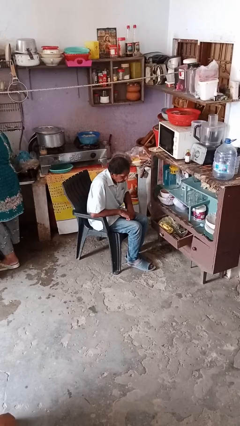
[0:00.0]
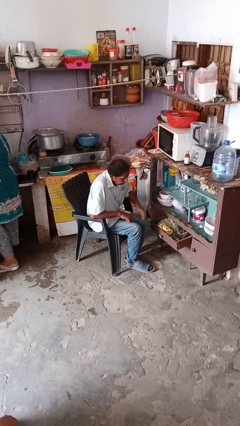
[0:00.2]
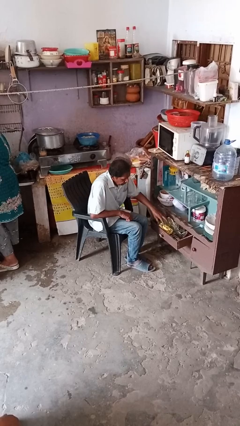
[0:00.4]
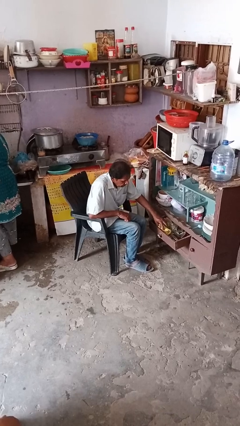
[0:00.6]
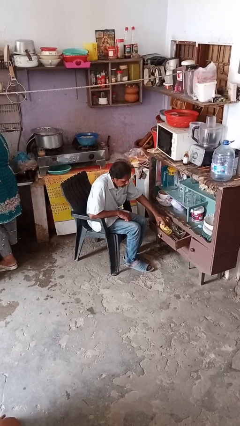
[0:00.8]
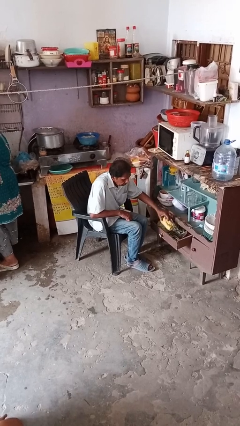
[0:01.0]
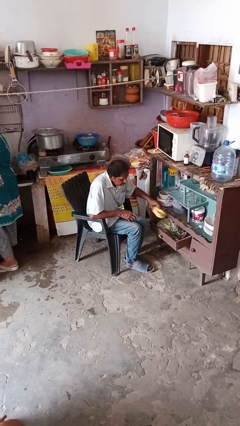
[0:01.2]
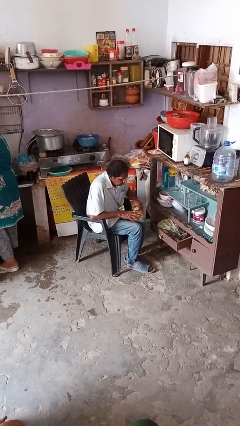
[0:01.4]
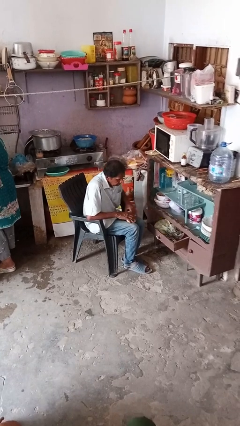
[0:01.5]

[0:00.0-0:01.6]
person takes clothes from dresser

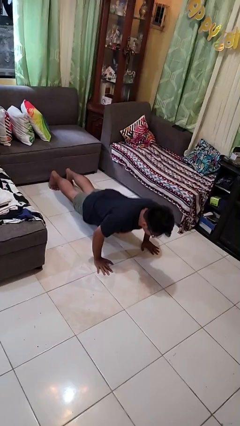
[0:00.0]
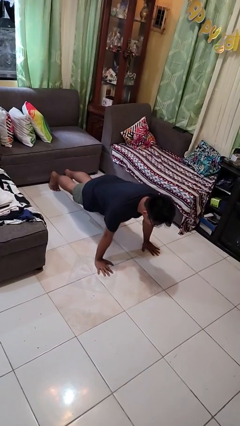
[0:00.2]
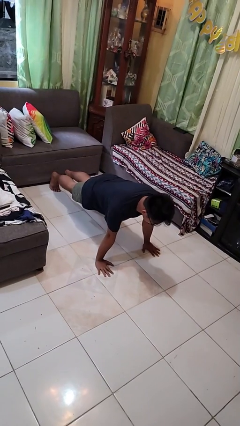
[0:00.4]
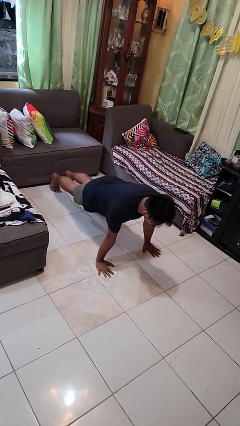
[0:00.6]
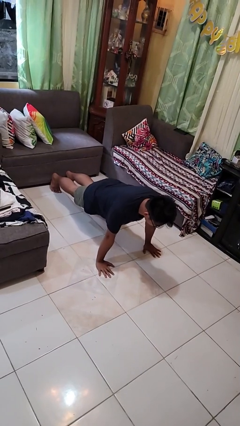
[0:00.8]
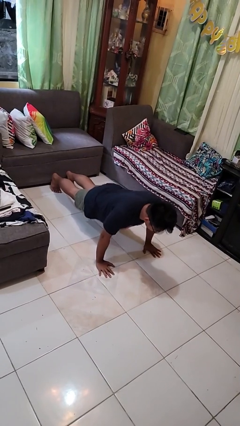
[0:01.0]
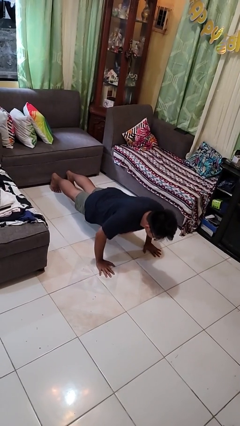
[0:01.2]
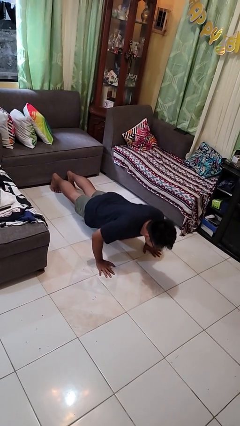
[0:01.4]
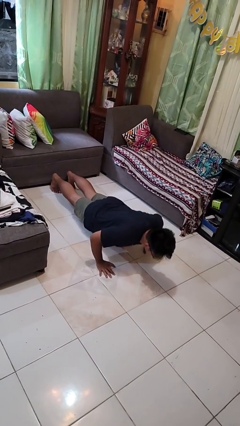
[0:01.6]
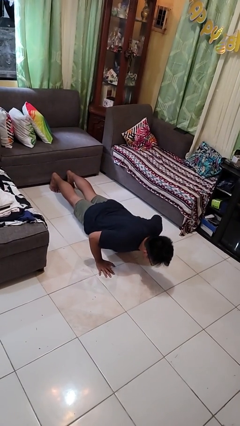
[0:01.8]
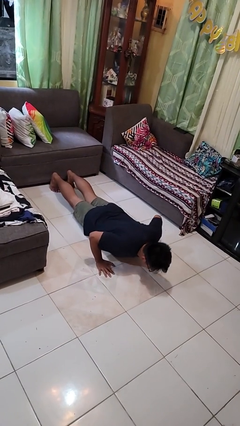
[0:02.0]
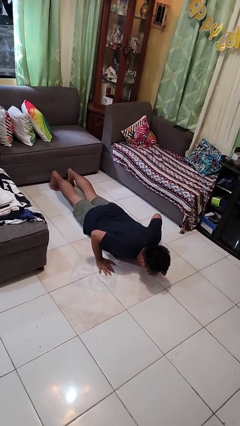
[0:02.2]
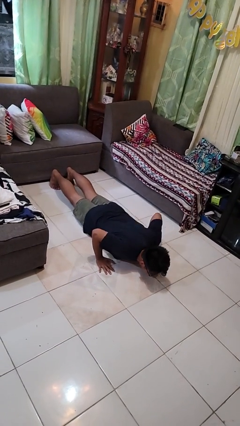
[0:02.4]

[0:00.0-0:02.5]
person exercises with pushup

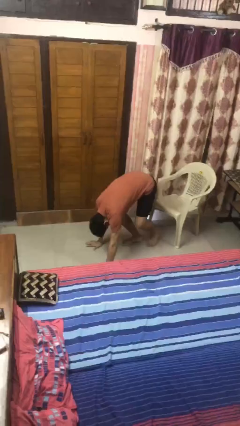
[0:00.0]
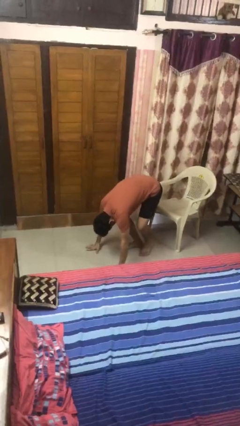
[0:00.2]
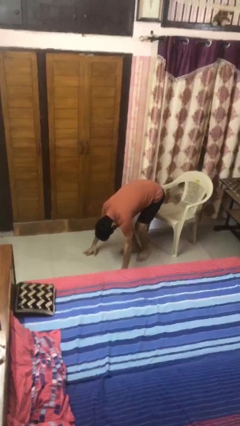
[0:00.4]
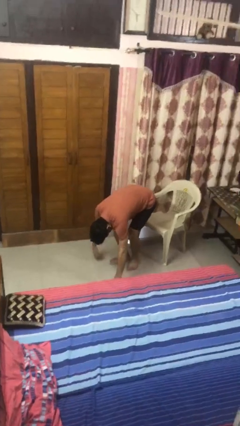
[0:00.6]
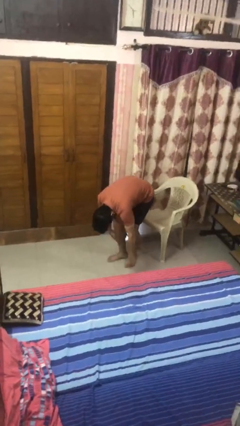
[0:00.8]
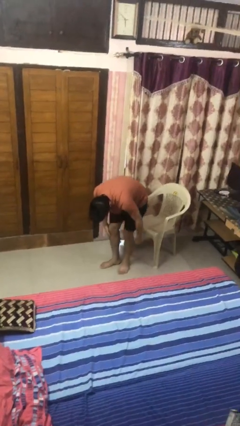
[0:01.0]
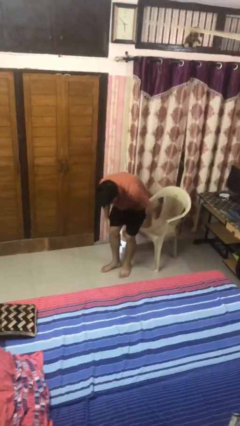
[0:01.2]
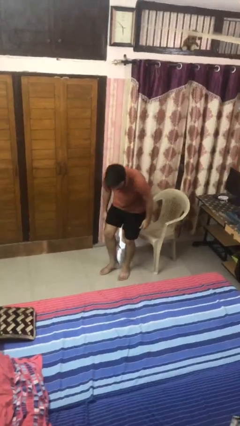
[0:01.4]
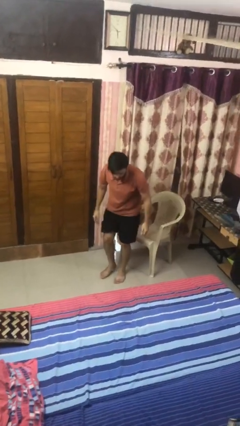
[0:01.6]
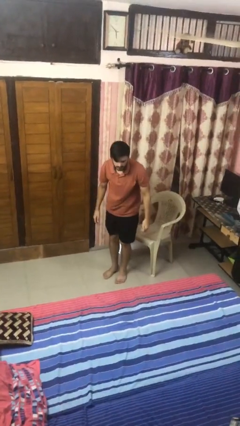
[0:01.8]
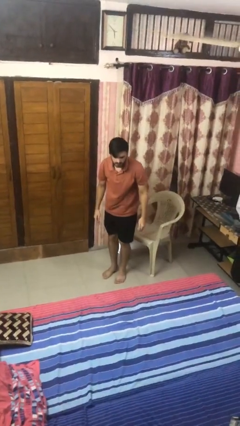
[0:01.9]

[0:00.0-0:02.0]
person stands up from floor

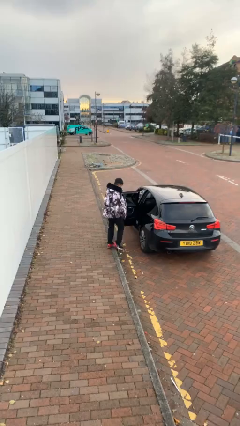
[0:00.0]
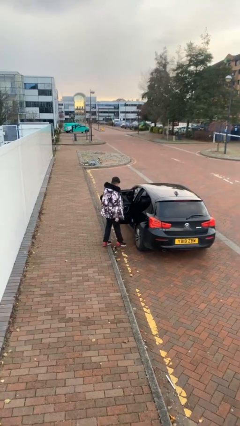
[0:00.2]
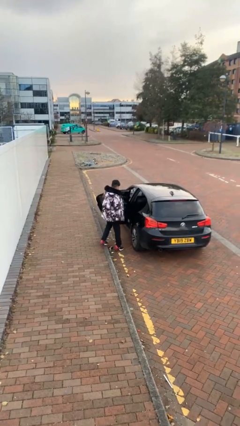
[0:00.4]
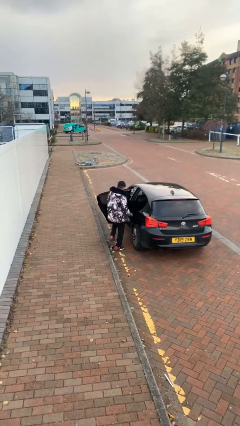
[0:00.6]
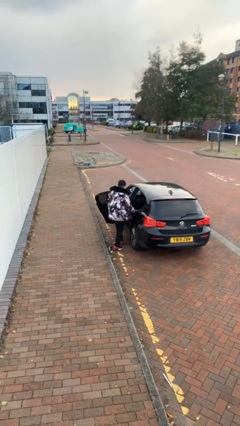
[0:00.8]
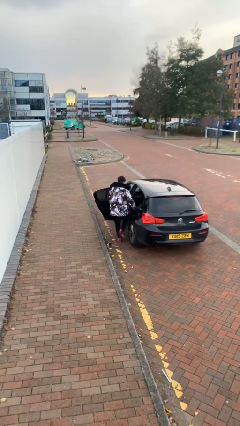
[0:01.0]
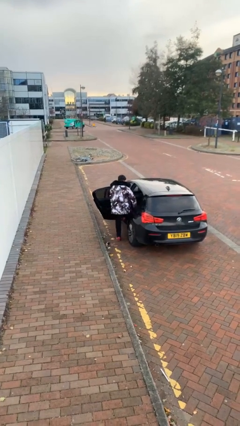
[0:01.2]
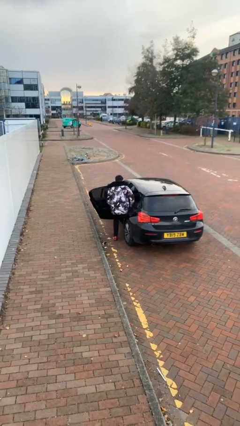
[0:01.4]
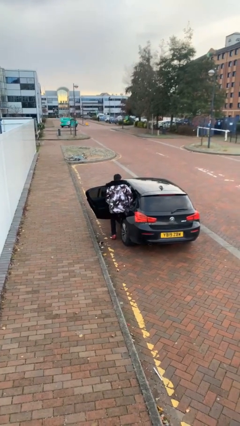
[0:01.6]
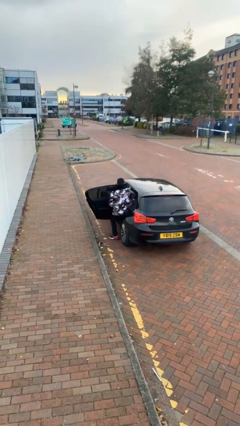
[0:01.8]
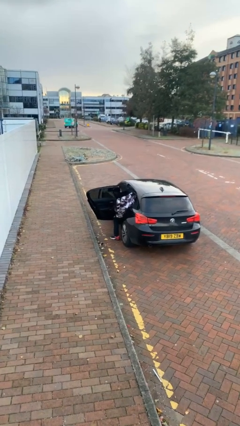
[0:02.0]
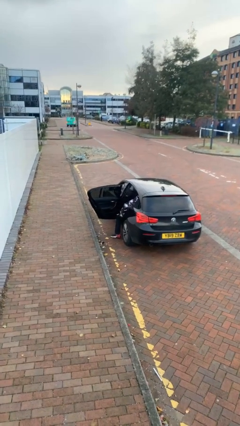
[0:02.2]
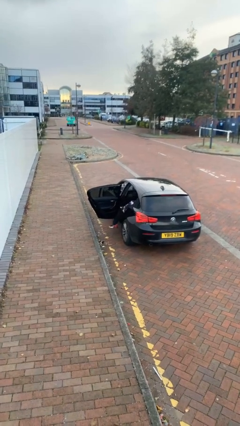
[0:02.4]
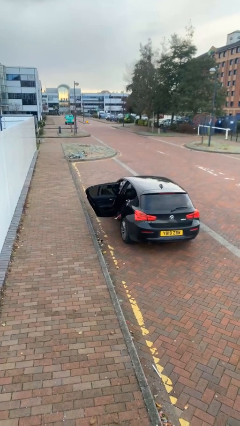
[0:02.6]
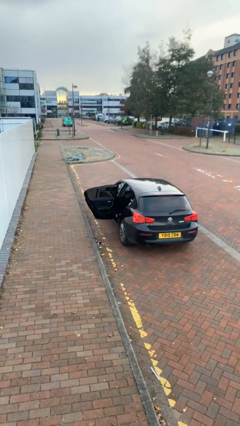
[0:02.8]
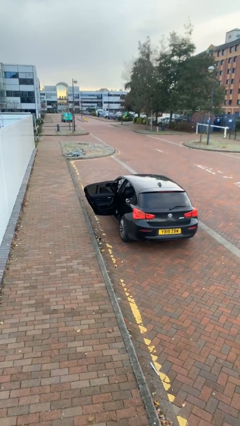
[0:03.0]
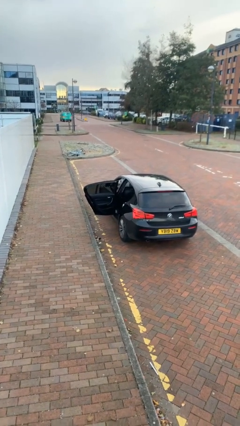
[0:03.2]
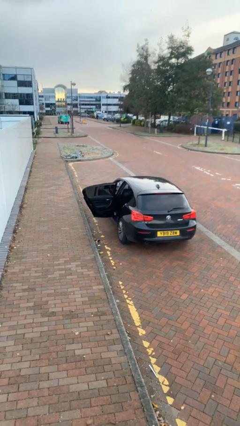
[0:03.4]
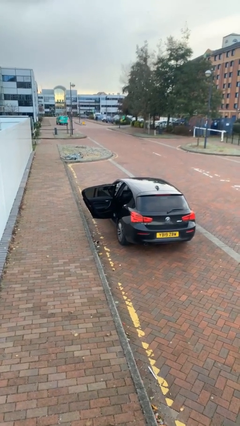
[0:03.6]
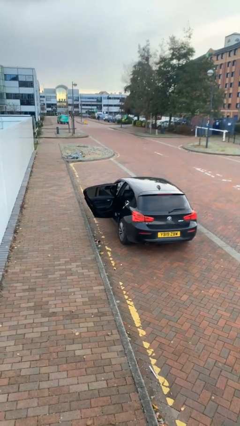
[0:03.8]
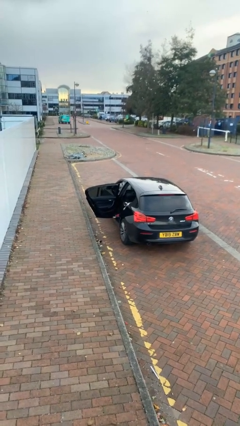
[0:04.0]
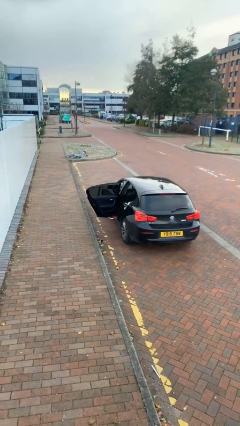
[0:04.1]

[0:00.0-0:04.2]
person enters car

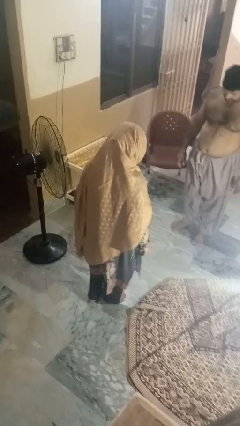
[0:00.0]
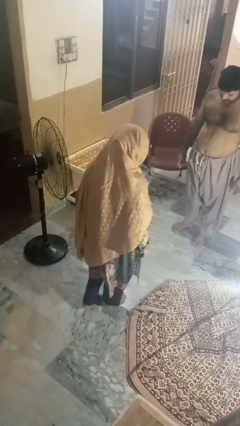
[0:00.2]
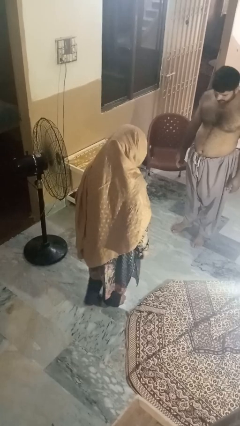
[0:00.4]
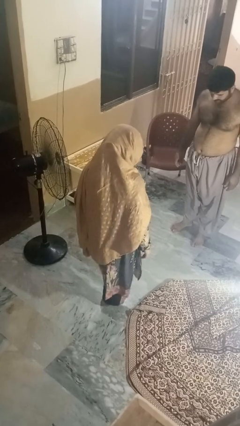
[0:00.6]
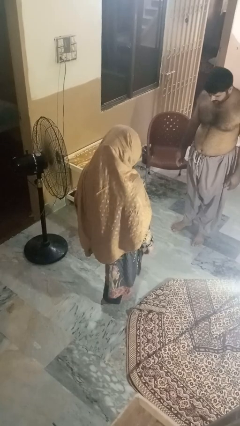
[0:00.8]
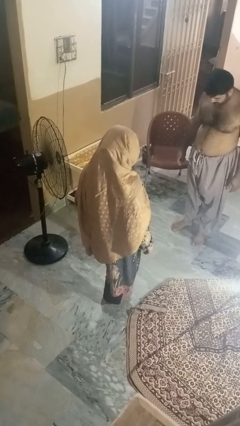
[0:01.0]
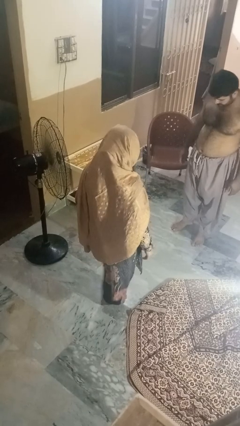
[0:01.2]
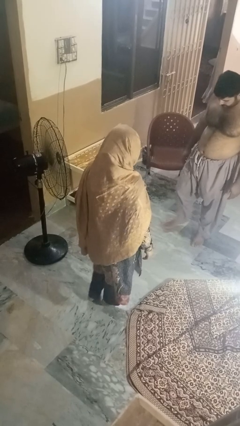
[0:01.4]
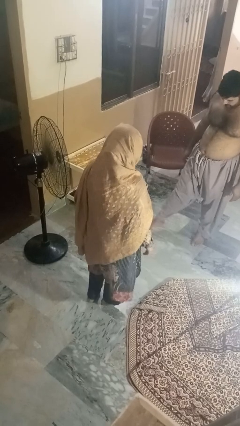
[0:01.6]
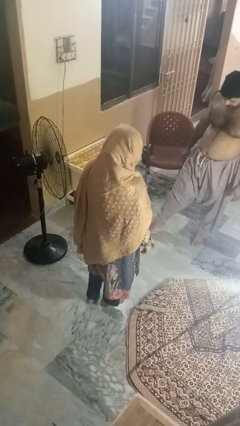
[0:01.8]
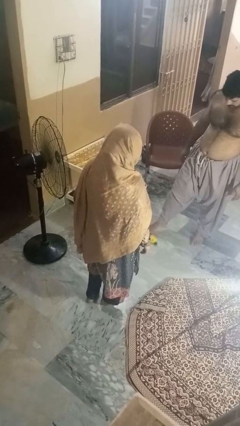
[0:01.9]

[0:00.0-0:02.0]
person kicks object to person

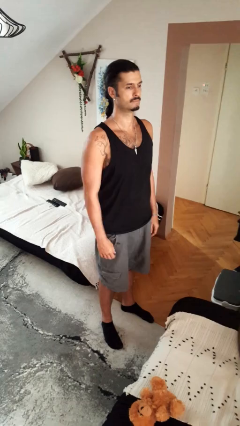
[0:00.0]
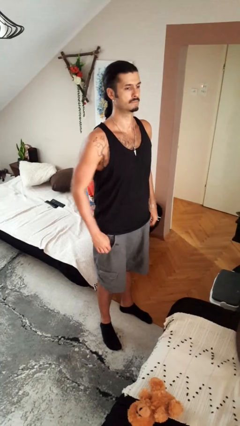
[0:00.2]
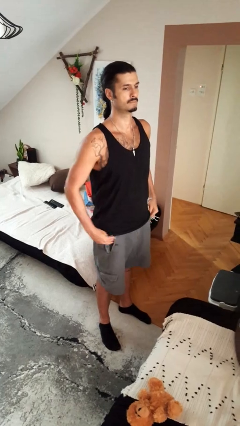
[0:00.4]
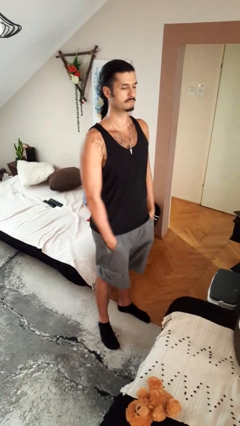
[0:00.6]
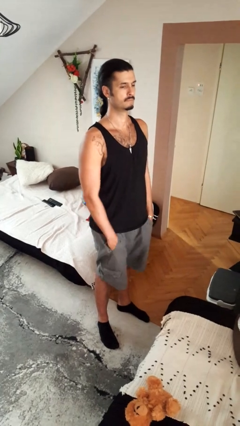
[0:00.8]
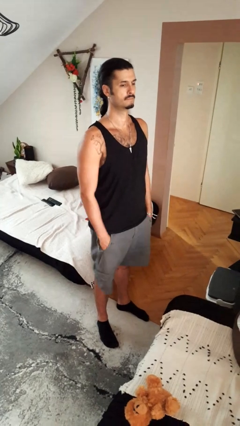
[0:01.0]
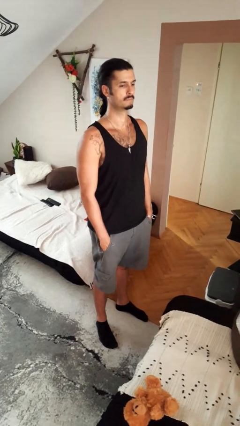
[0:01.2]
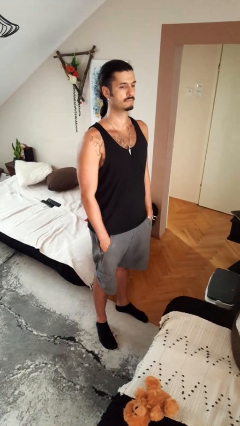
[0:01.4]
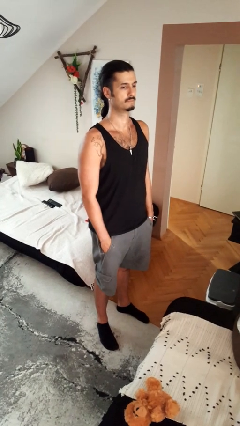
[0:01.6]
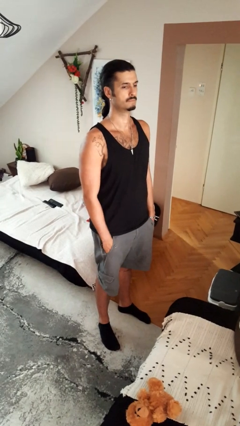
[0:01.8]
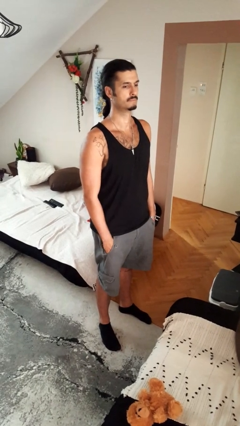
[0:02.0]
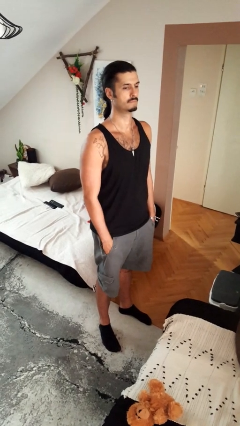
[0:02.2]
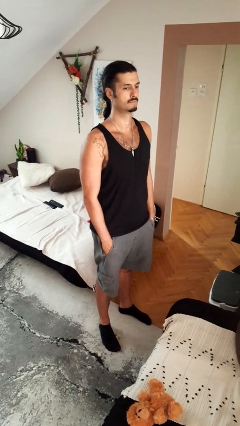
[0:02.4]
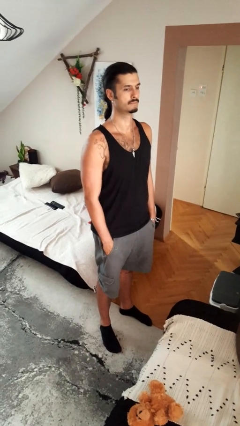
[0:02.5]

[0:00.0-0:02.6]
person puts hands in back pockets

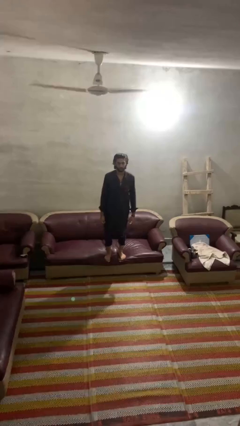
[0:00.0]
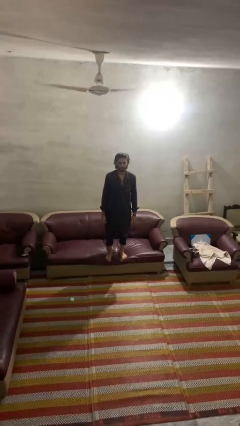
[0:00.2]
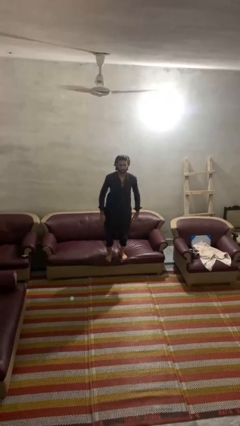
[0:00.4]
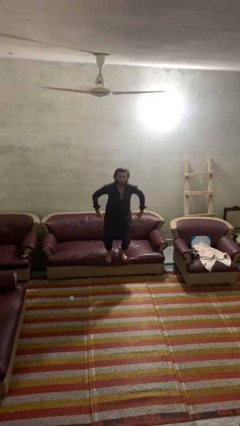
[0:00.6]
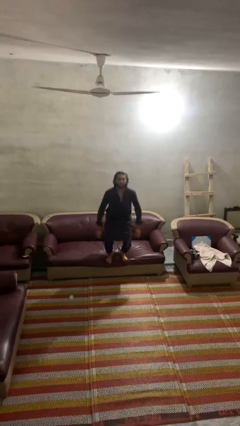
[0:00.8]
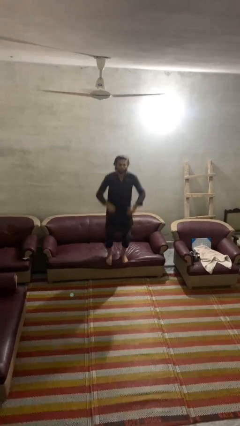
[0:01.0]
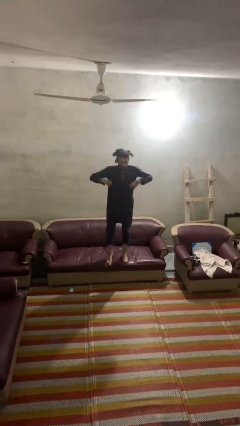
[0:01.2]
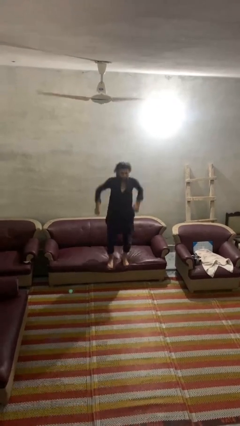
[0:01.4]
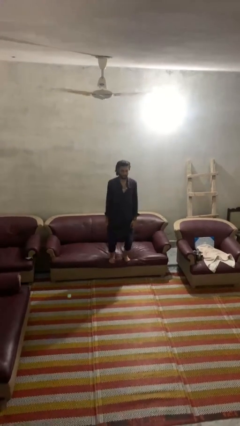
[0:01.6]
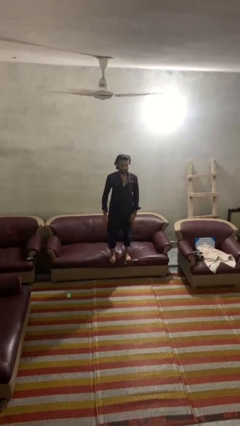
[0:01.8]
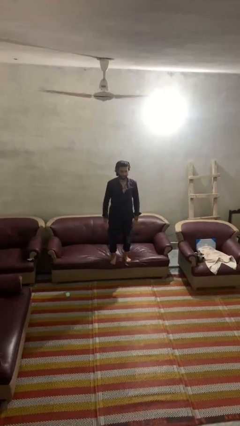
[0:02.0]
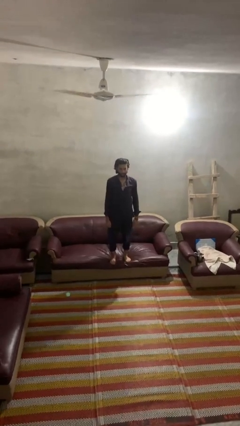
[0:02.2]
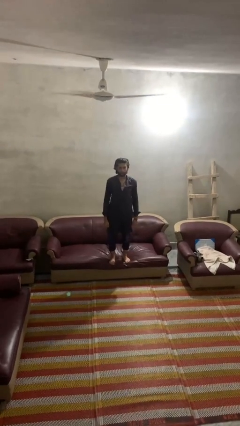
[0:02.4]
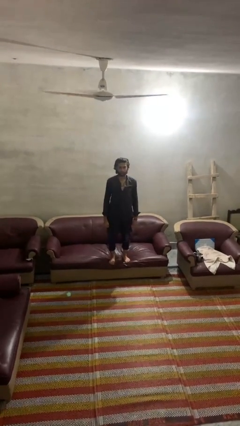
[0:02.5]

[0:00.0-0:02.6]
person jumps on couch
